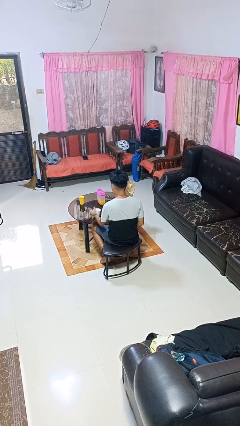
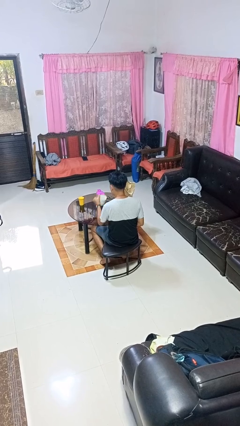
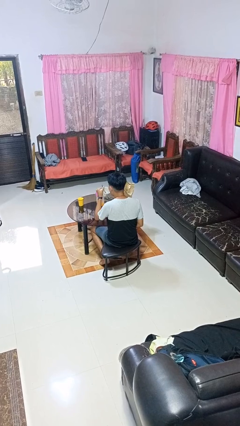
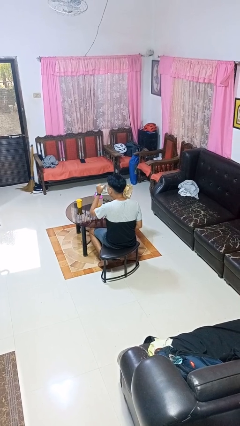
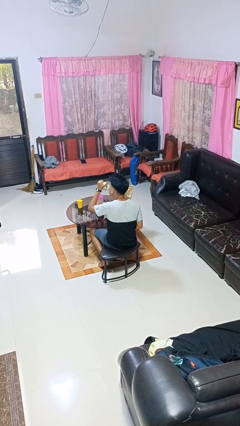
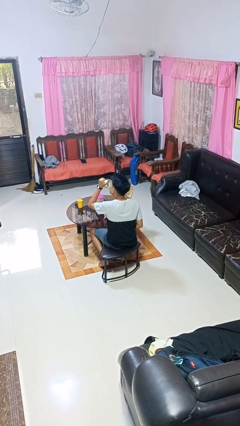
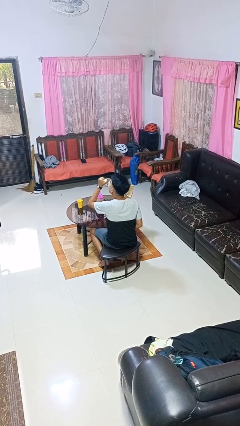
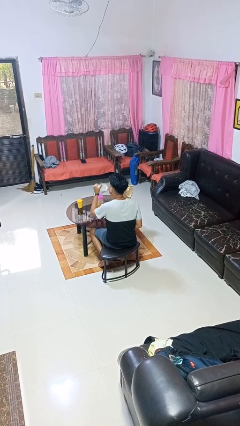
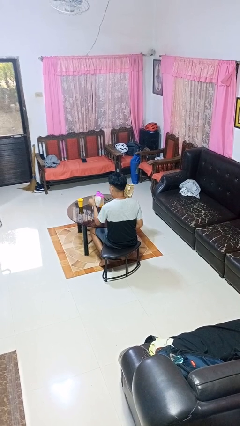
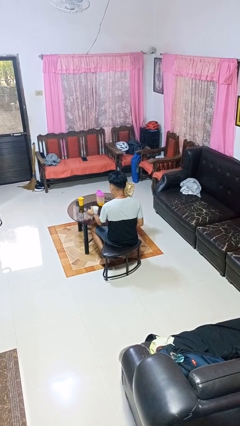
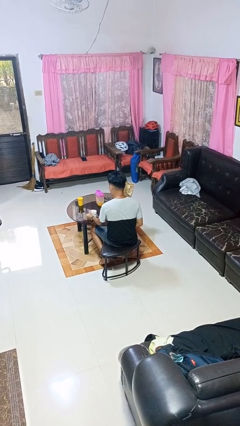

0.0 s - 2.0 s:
person drinks from mug

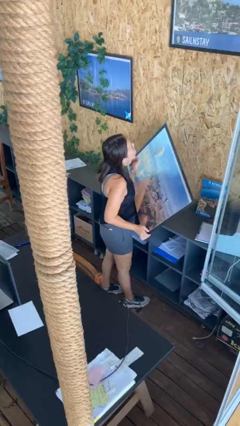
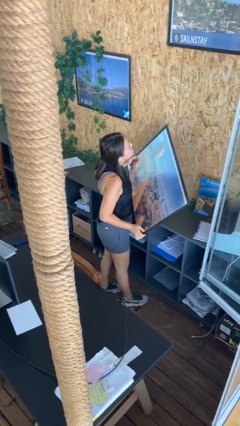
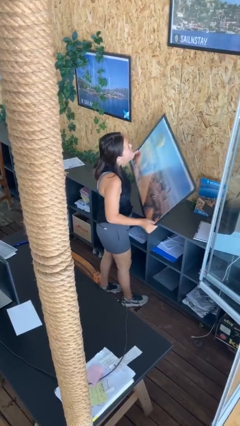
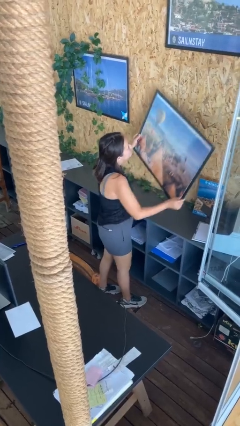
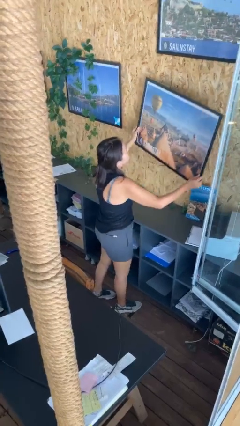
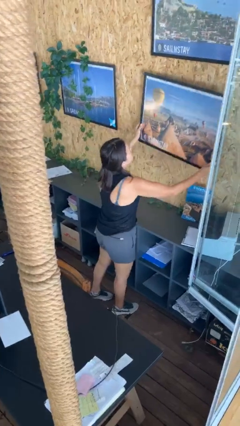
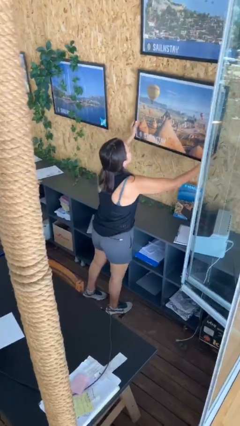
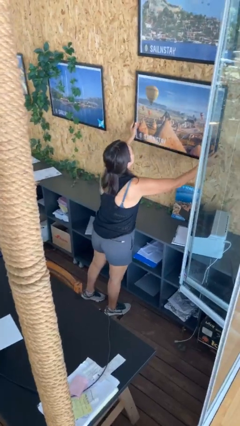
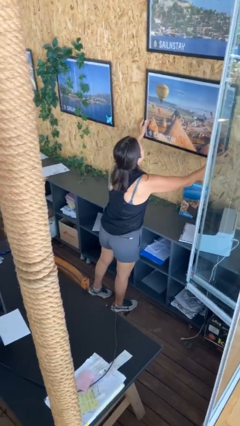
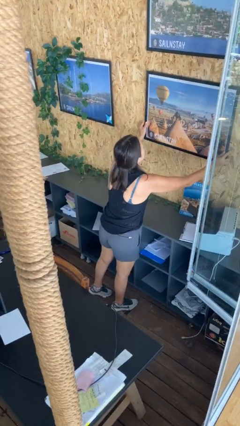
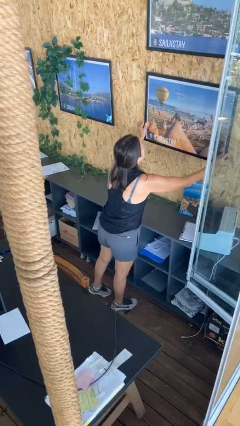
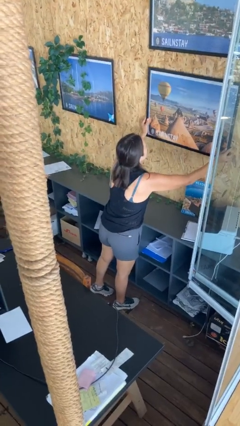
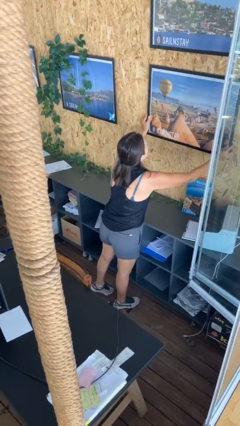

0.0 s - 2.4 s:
person puts up picture frame

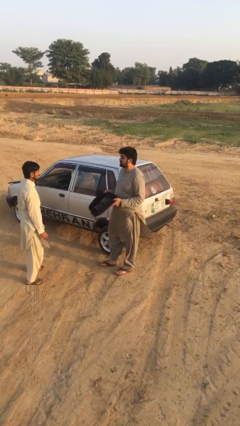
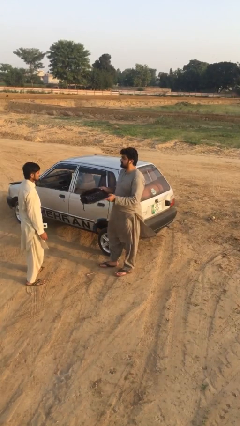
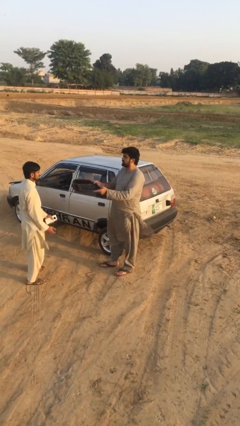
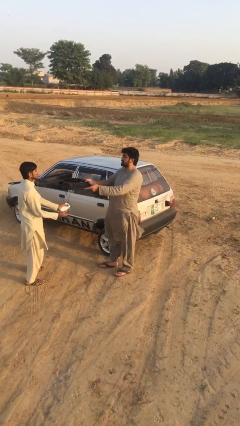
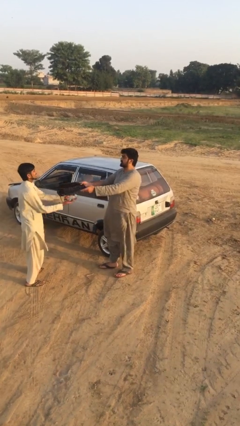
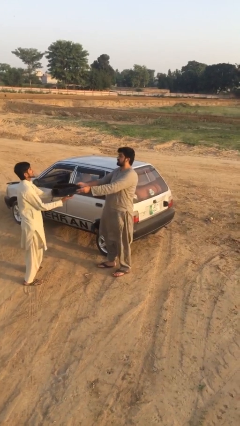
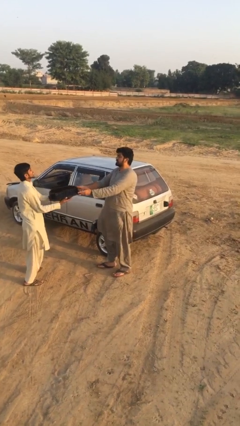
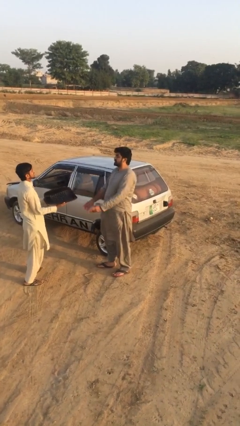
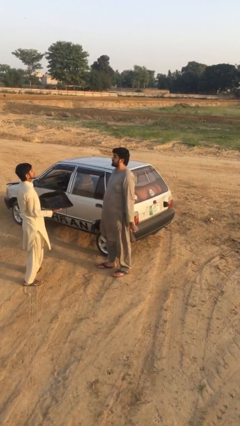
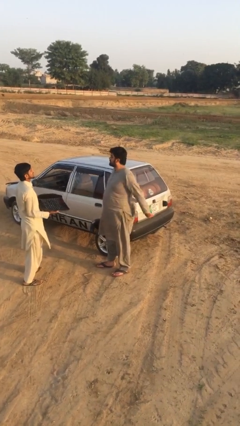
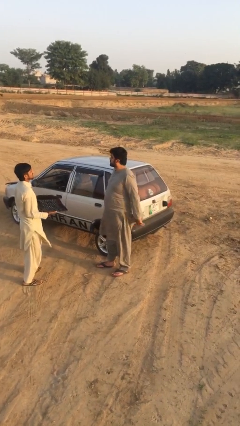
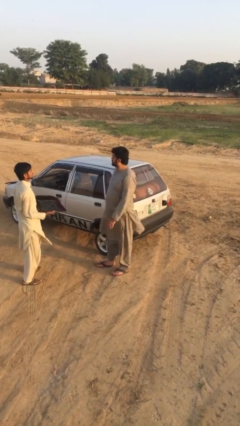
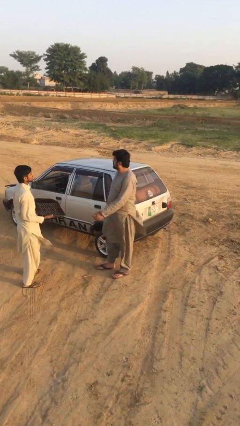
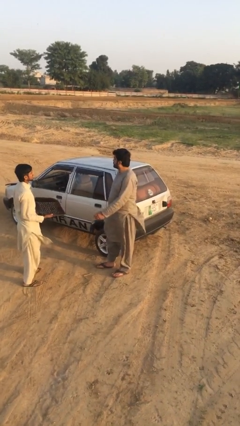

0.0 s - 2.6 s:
person transfers object to person

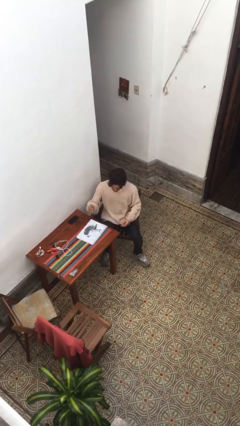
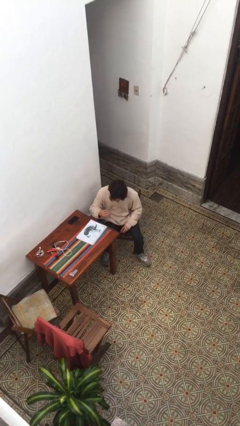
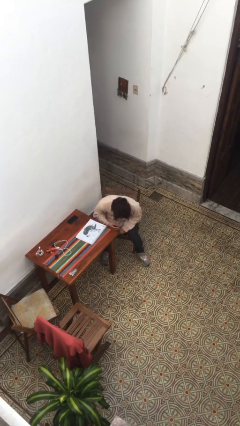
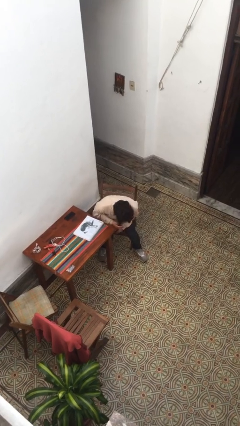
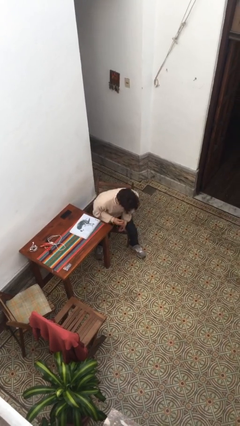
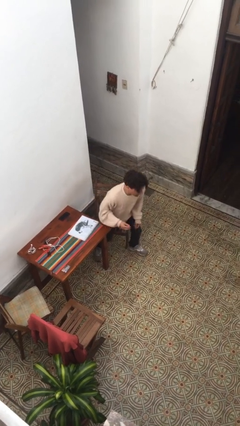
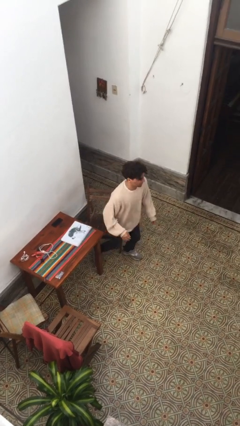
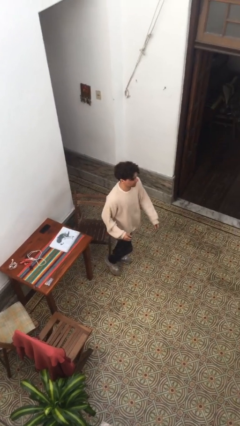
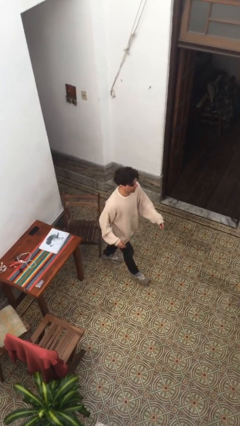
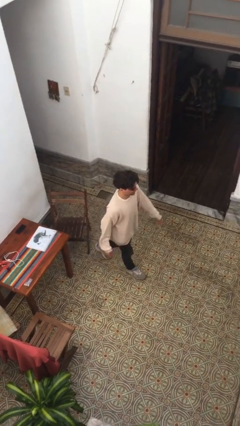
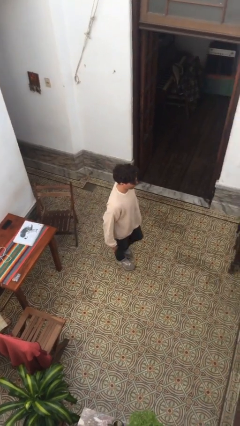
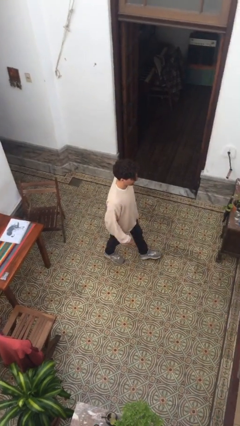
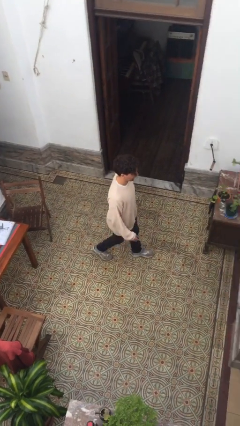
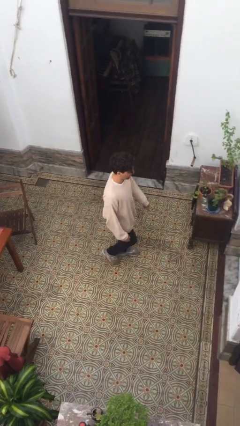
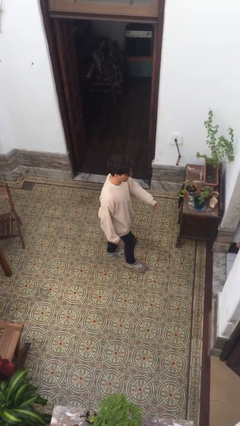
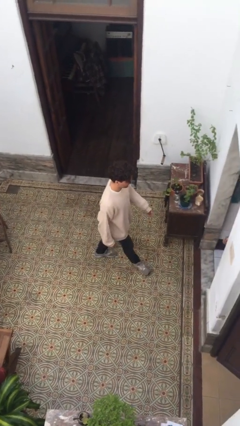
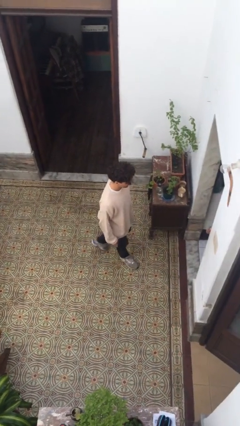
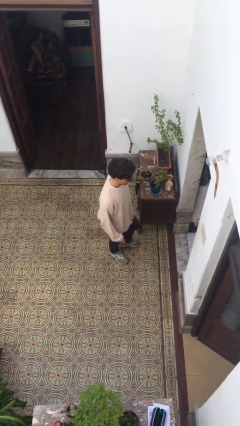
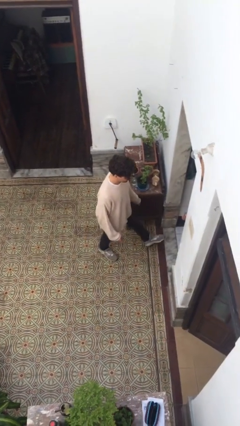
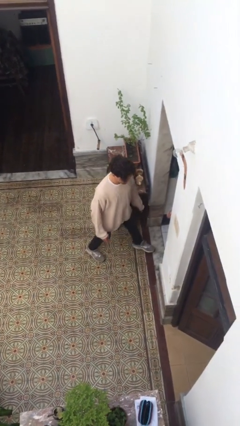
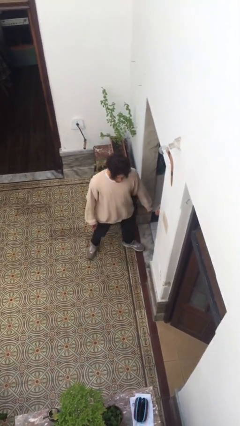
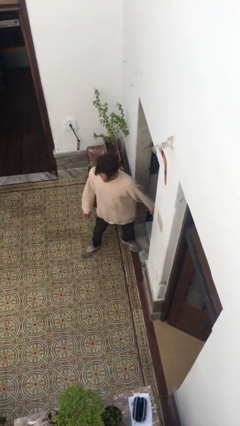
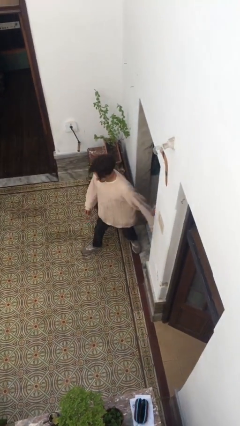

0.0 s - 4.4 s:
person stands up

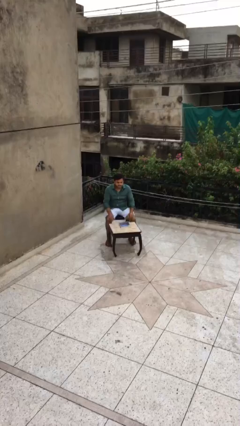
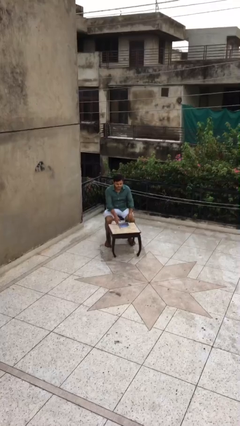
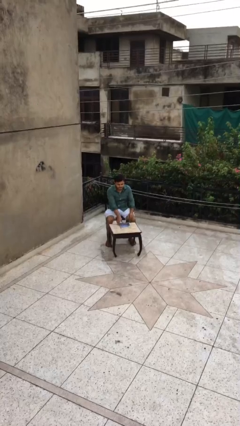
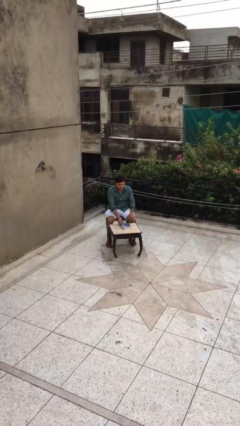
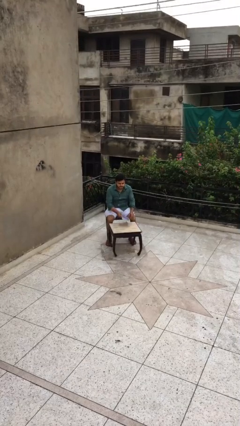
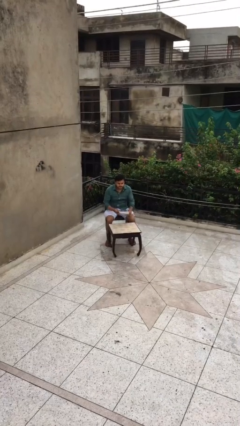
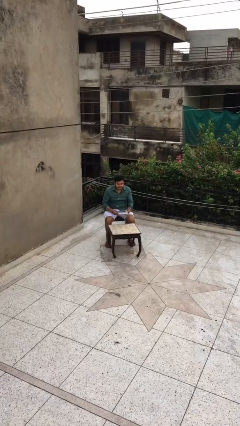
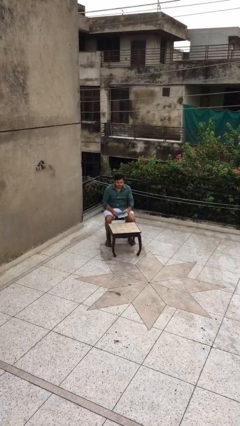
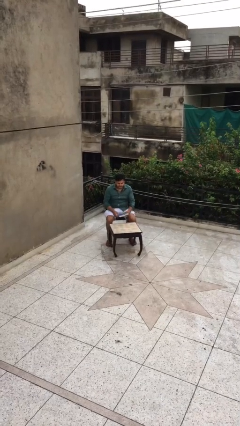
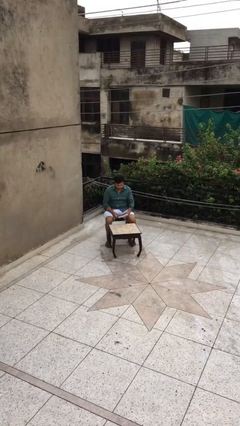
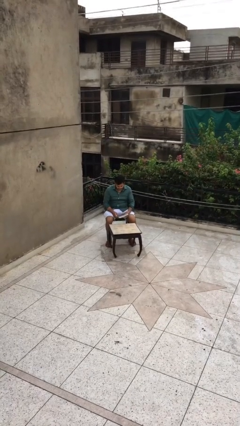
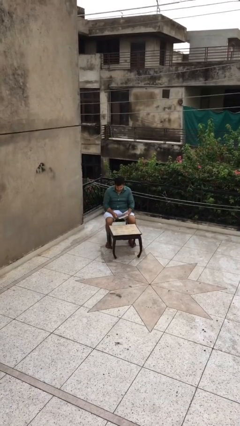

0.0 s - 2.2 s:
person picks up object from table

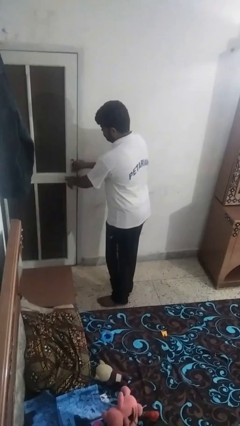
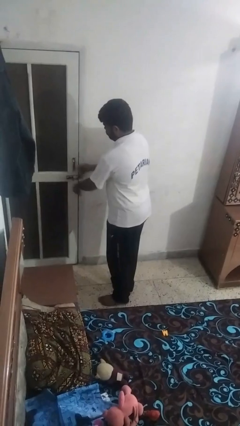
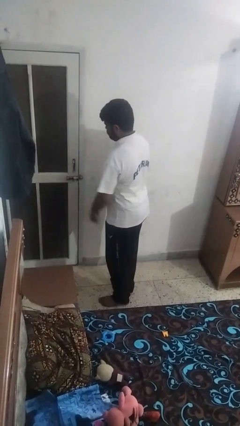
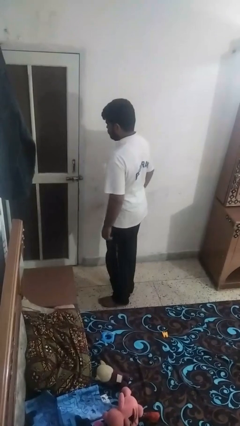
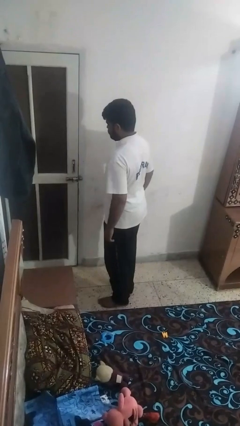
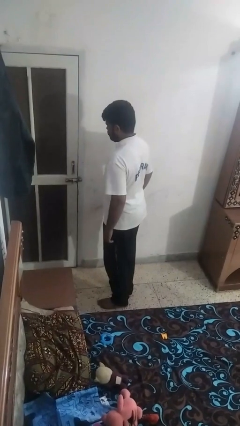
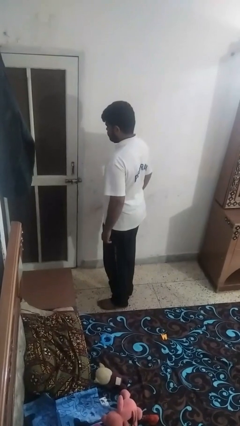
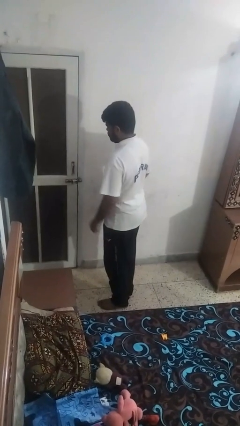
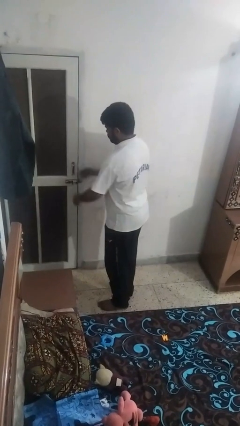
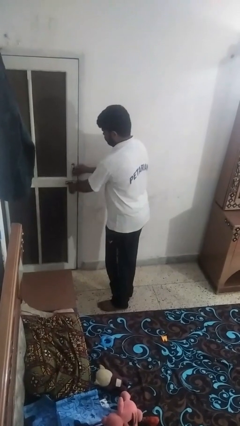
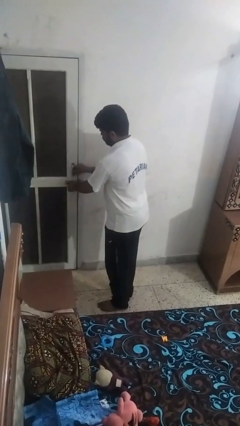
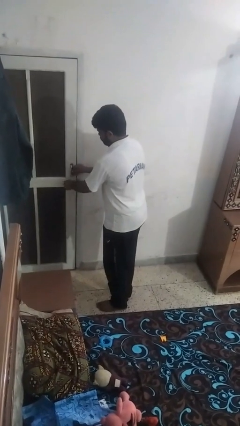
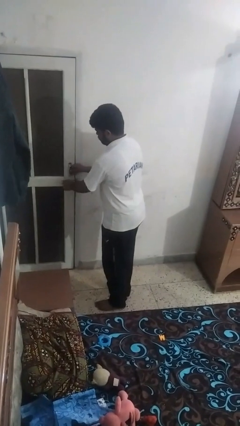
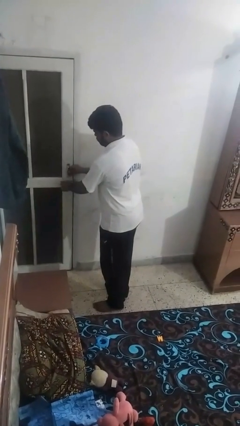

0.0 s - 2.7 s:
person unlocks door with keys

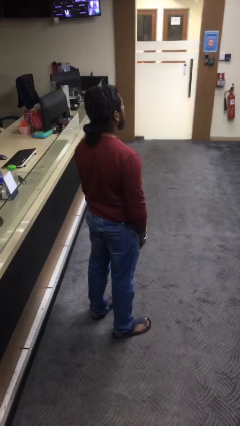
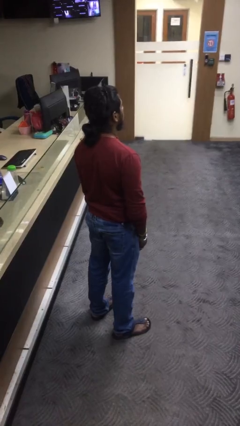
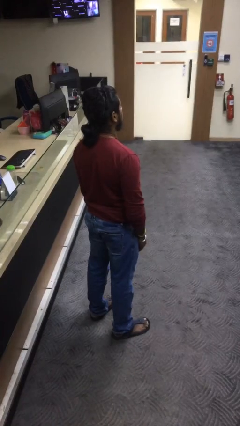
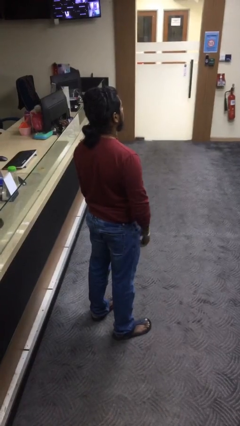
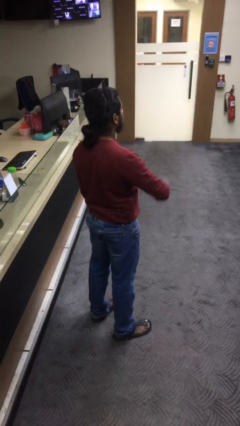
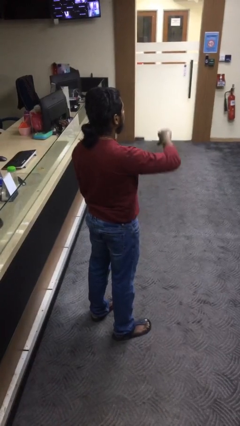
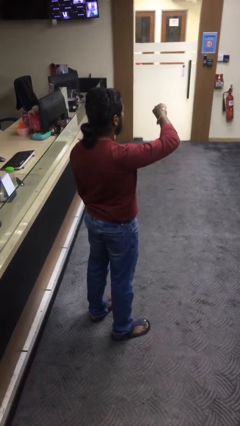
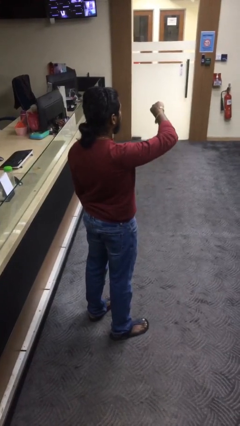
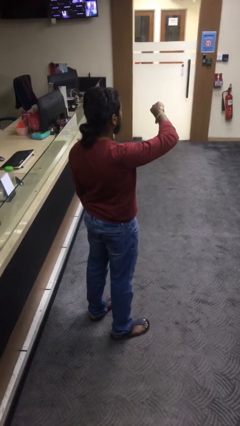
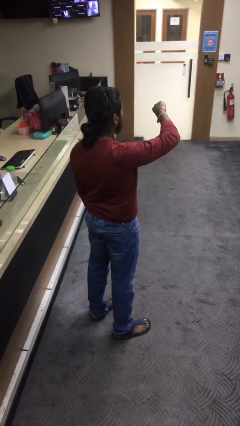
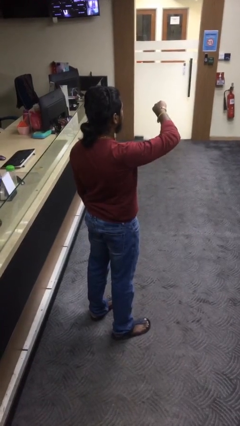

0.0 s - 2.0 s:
person gestures thumbs down
